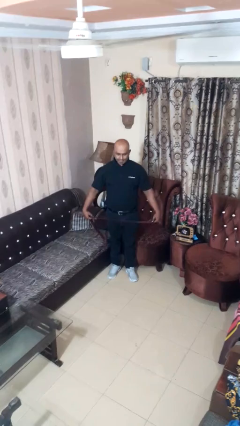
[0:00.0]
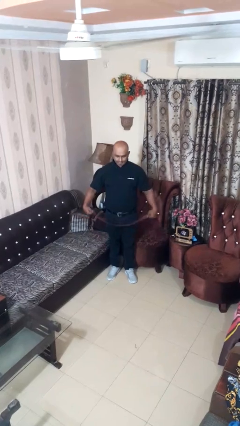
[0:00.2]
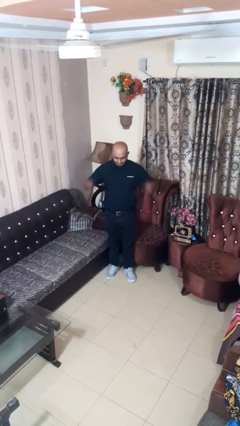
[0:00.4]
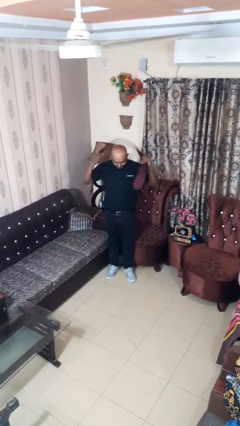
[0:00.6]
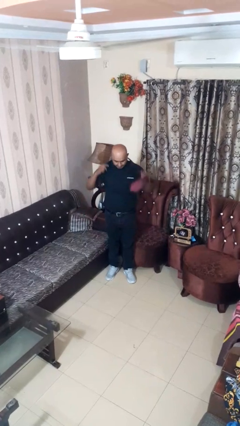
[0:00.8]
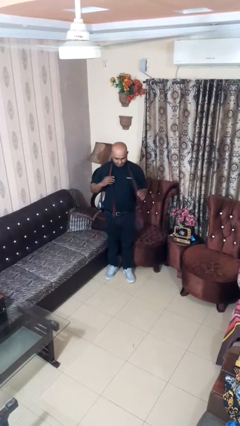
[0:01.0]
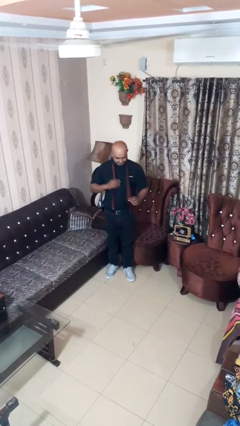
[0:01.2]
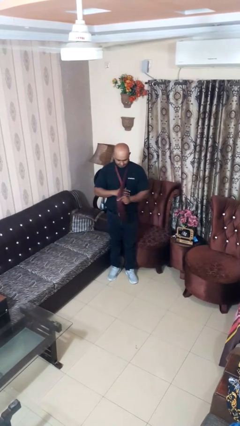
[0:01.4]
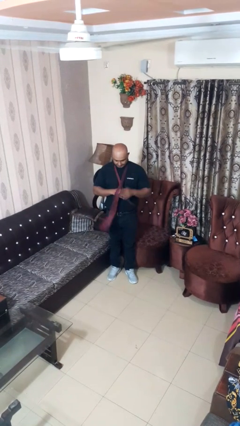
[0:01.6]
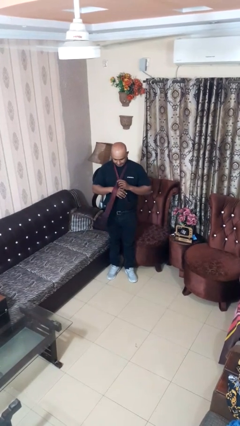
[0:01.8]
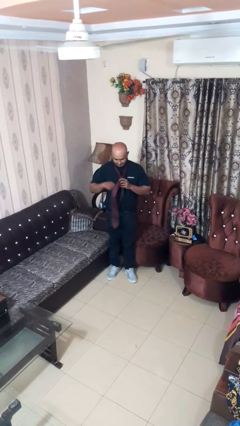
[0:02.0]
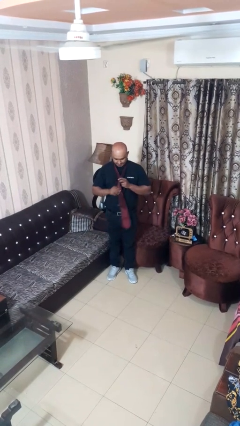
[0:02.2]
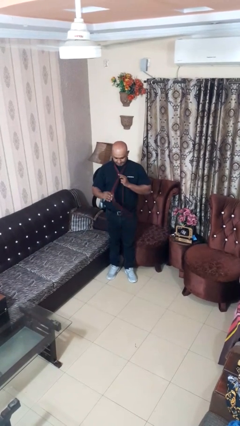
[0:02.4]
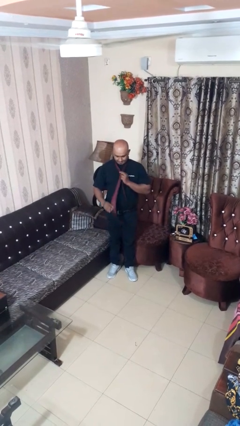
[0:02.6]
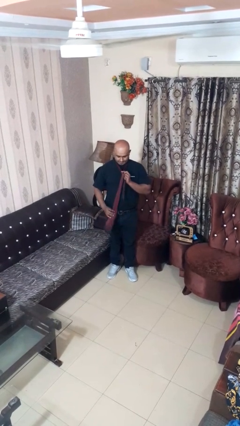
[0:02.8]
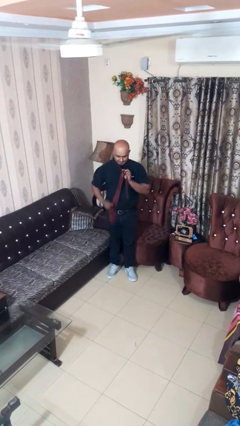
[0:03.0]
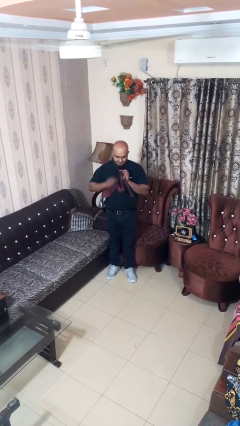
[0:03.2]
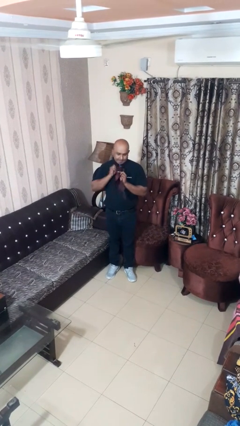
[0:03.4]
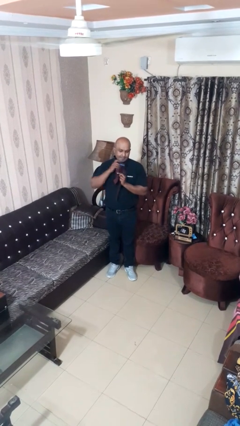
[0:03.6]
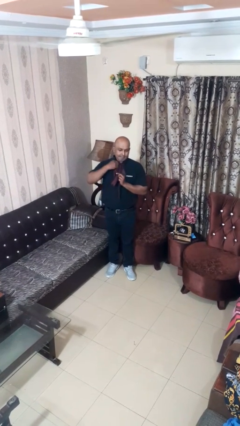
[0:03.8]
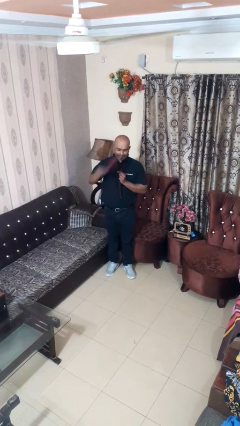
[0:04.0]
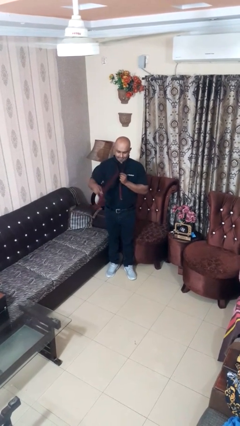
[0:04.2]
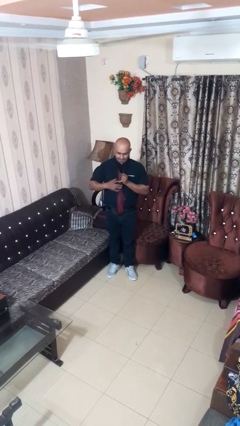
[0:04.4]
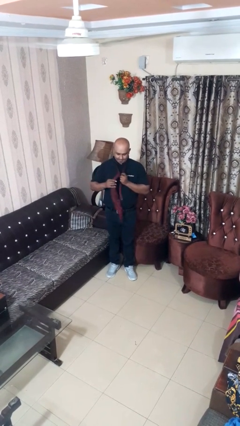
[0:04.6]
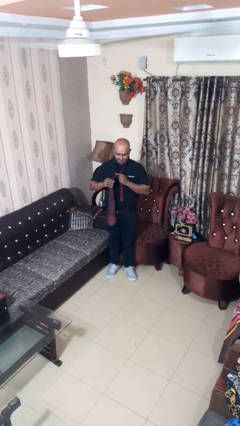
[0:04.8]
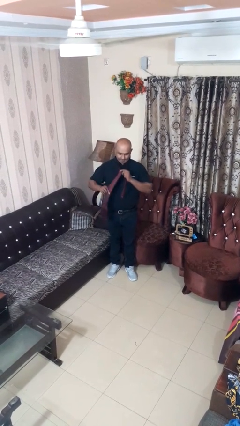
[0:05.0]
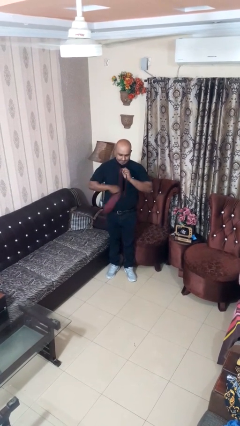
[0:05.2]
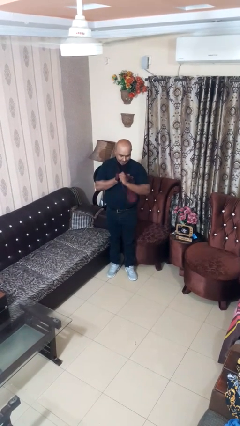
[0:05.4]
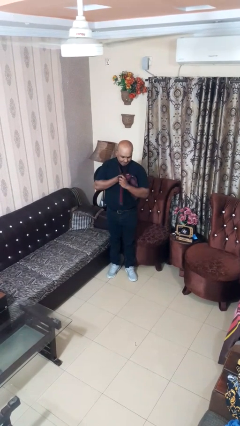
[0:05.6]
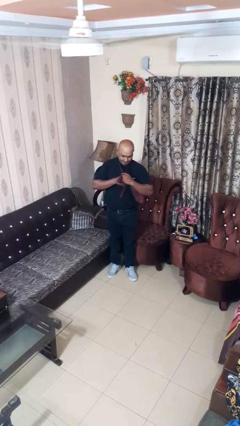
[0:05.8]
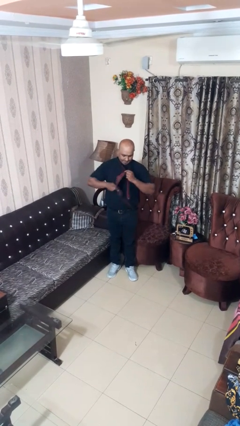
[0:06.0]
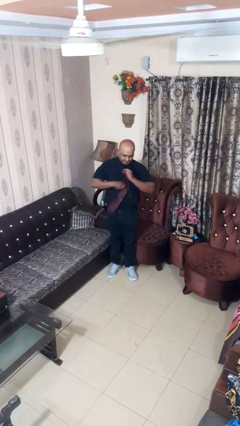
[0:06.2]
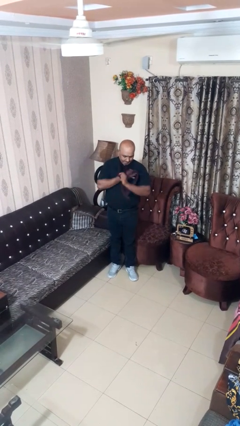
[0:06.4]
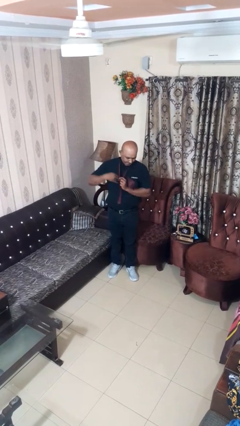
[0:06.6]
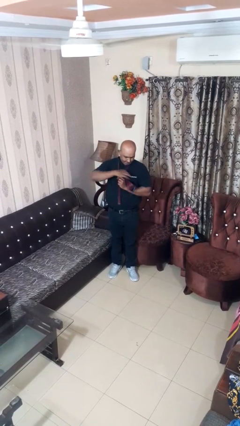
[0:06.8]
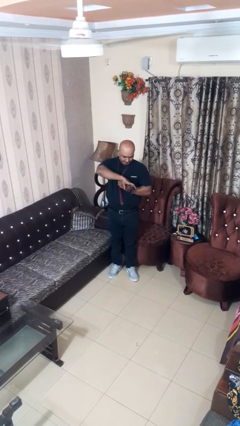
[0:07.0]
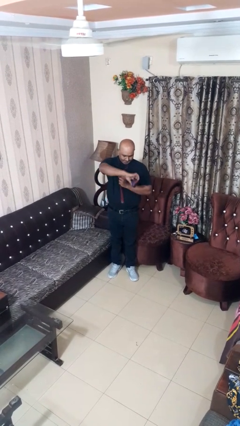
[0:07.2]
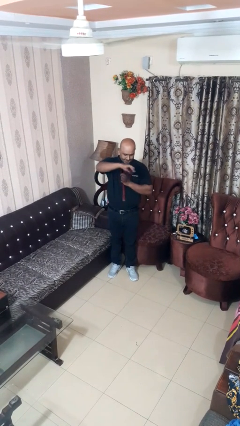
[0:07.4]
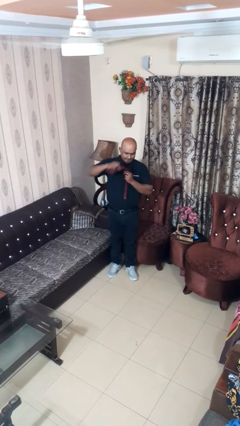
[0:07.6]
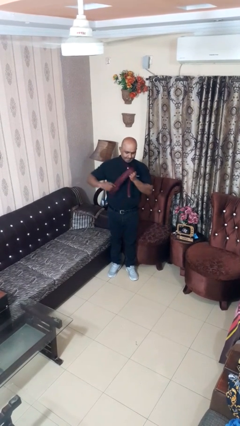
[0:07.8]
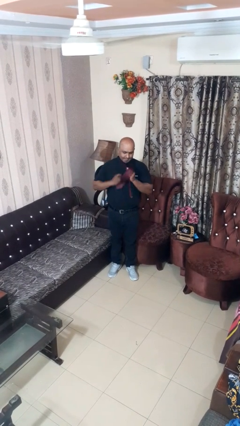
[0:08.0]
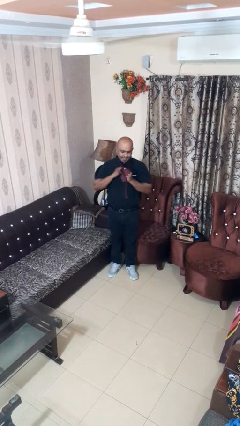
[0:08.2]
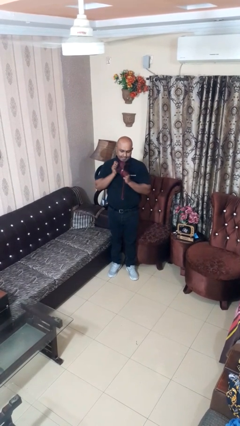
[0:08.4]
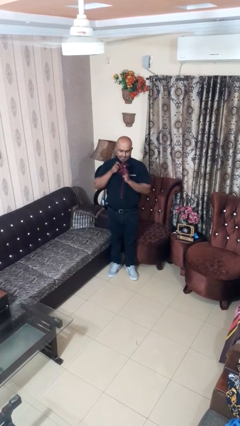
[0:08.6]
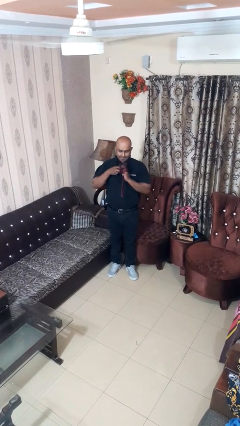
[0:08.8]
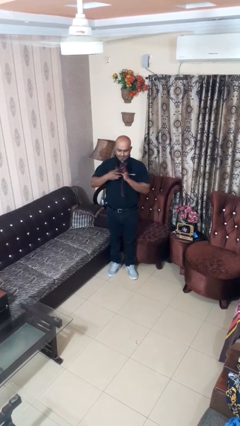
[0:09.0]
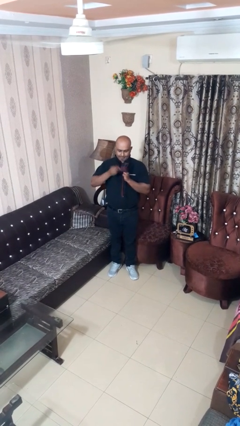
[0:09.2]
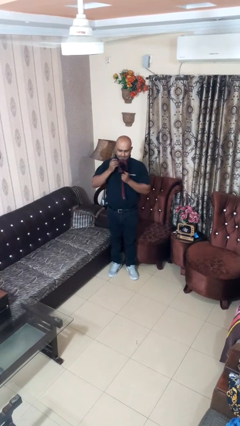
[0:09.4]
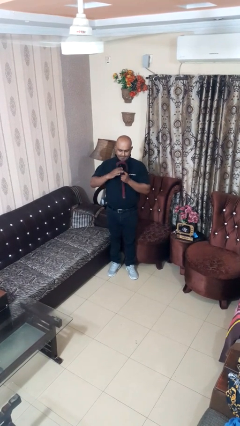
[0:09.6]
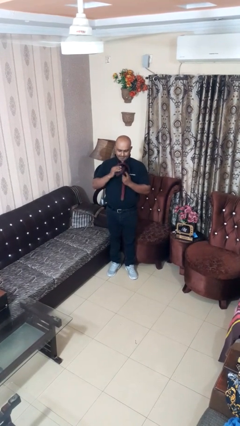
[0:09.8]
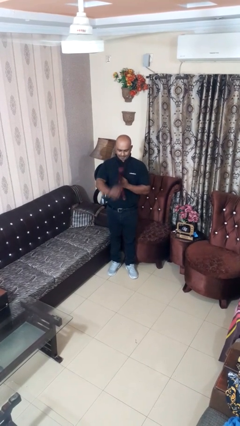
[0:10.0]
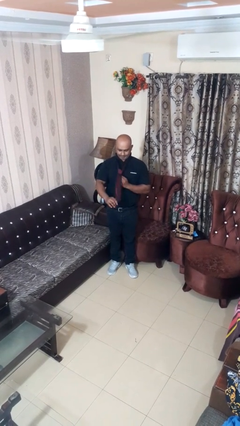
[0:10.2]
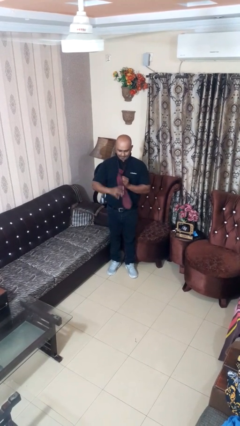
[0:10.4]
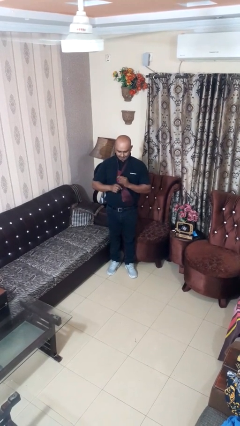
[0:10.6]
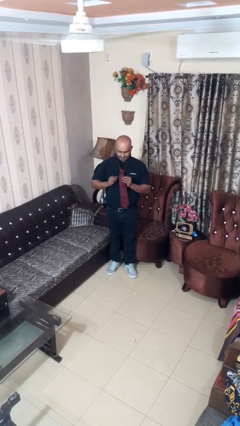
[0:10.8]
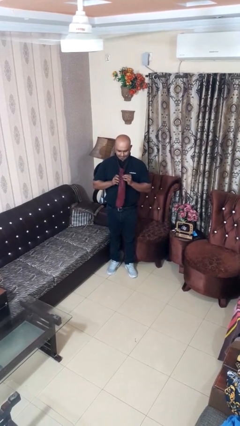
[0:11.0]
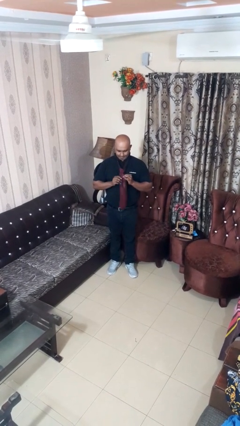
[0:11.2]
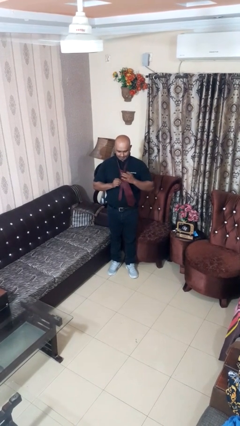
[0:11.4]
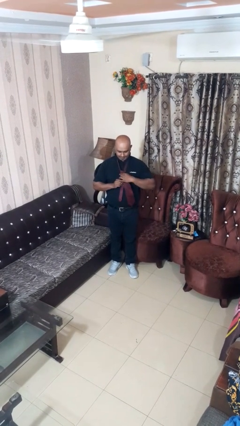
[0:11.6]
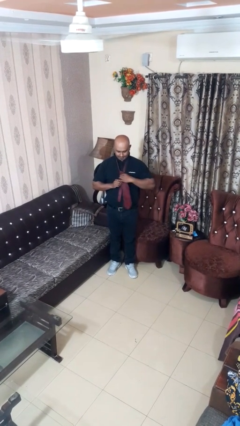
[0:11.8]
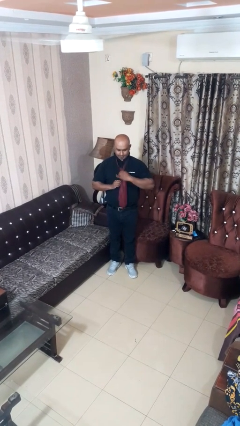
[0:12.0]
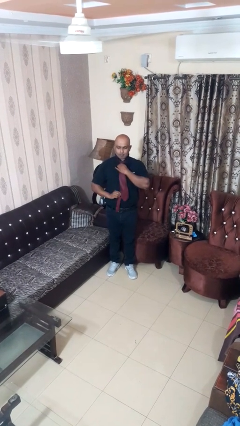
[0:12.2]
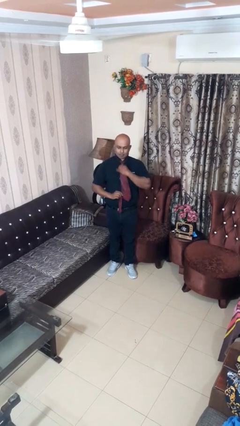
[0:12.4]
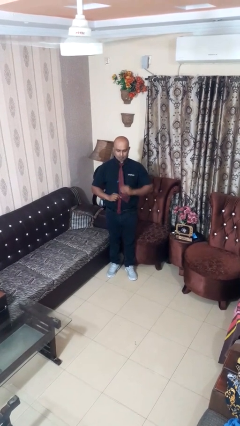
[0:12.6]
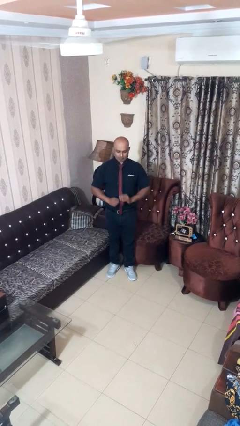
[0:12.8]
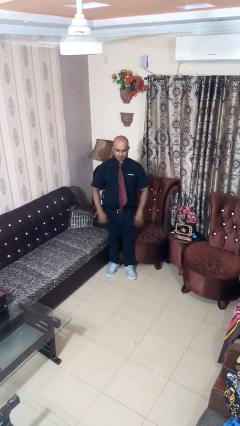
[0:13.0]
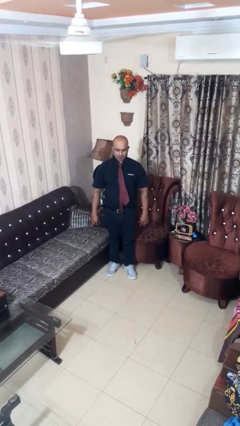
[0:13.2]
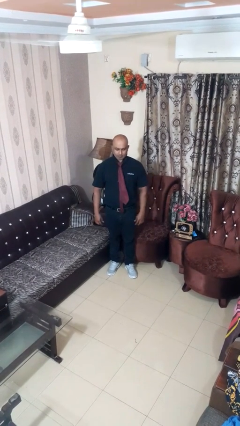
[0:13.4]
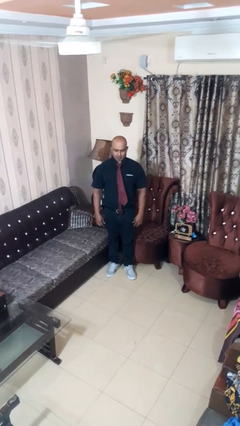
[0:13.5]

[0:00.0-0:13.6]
person puts on necktie

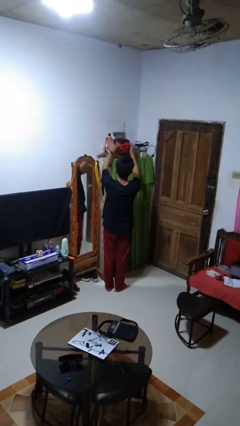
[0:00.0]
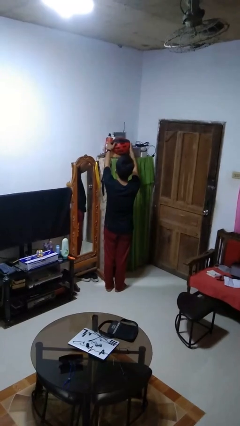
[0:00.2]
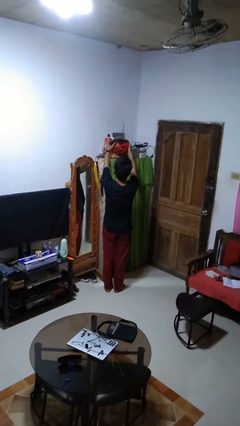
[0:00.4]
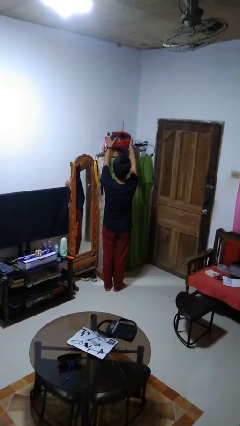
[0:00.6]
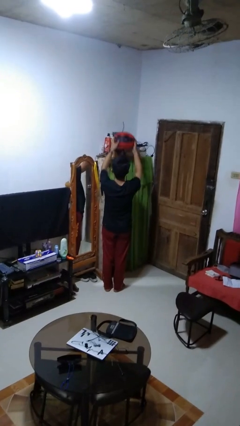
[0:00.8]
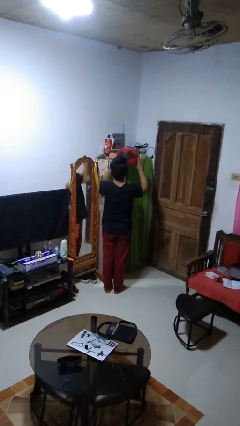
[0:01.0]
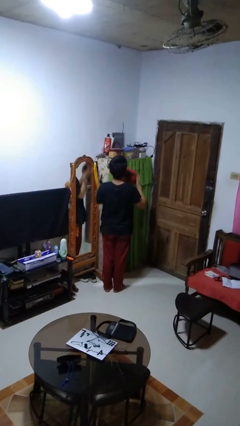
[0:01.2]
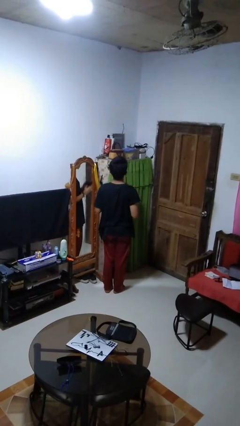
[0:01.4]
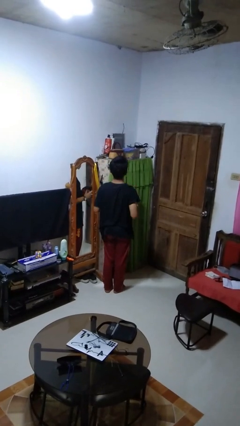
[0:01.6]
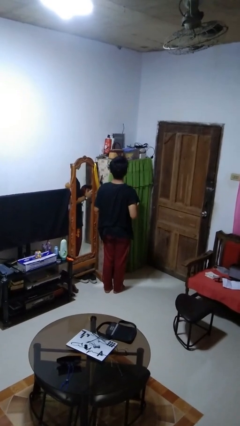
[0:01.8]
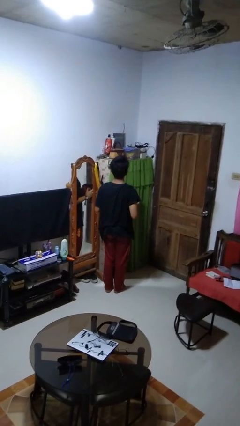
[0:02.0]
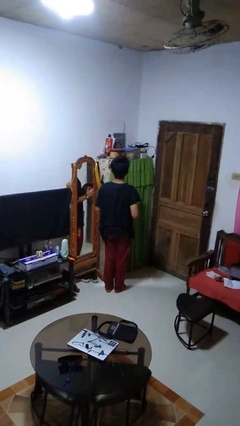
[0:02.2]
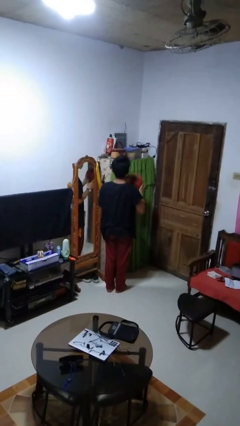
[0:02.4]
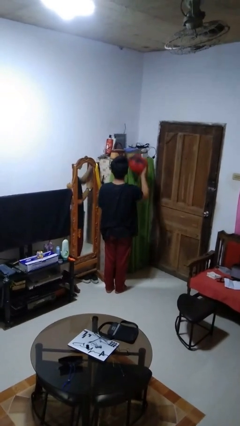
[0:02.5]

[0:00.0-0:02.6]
person picks up object from shelf

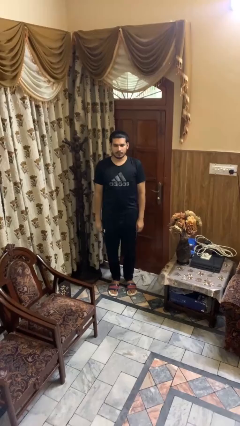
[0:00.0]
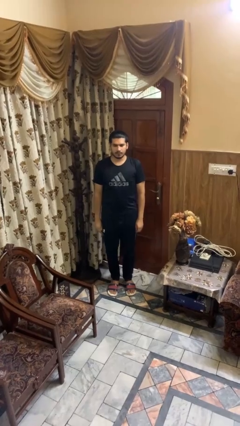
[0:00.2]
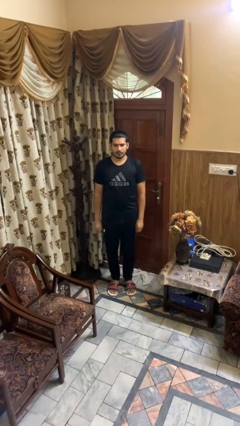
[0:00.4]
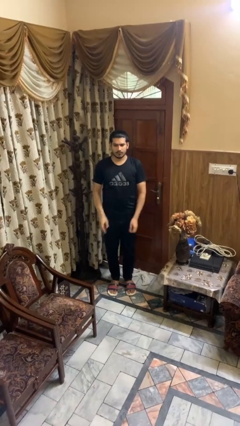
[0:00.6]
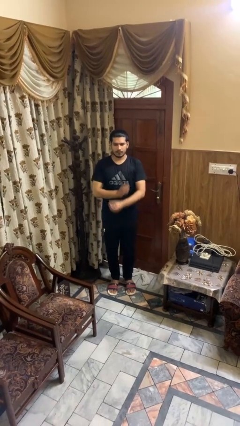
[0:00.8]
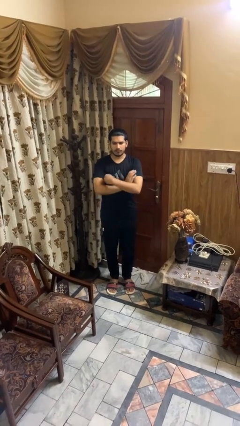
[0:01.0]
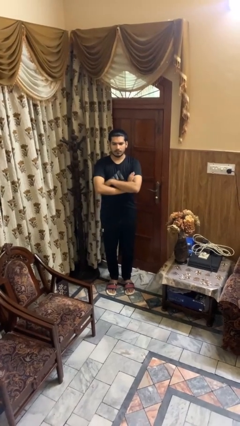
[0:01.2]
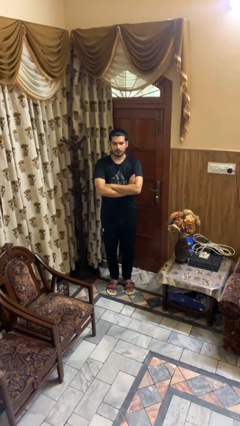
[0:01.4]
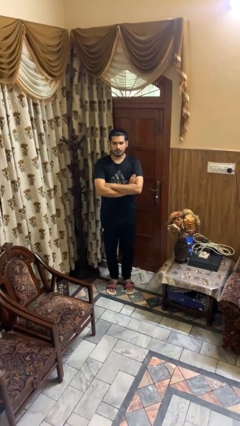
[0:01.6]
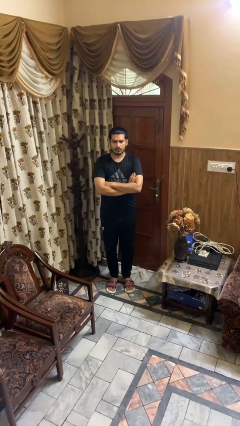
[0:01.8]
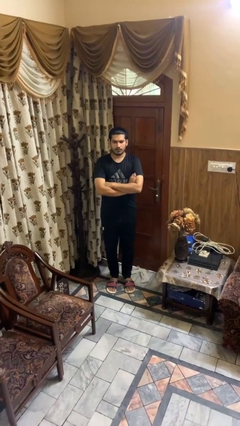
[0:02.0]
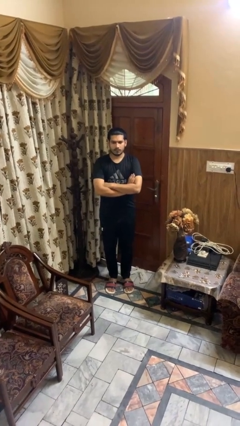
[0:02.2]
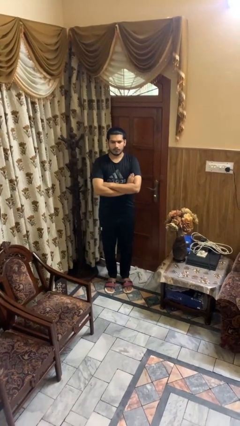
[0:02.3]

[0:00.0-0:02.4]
person crosses arms
